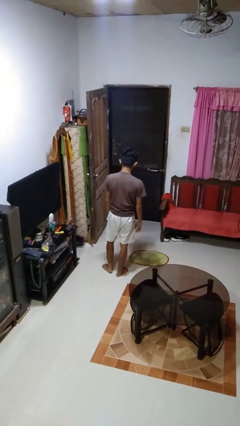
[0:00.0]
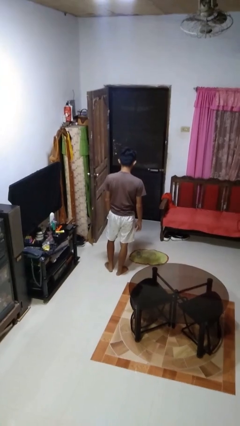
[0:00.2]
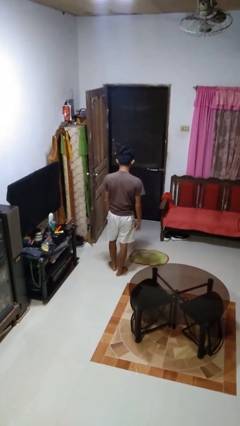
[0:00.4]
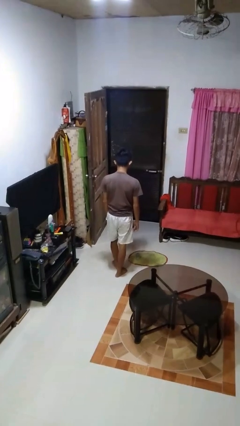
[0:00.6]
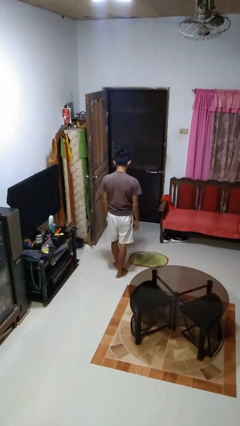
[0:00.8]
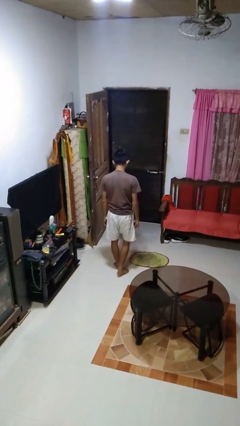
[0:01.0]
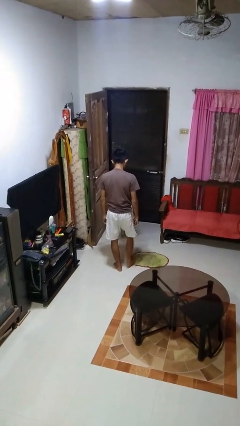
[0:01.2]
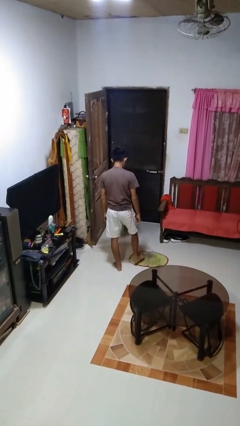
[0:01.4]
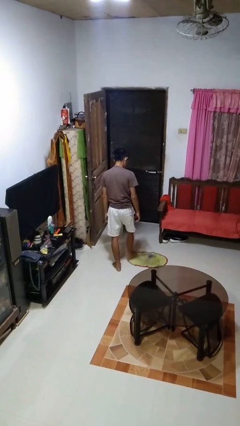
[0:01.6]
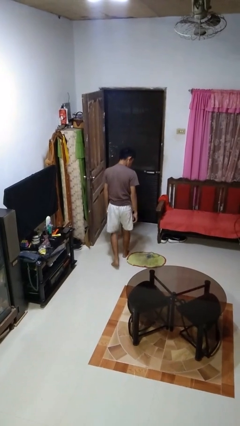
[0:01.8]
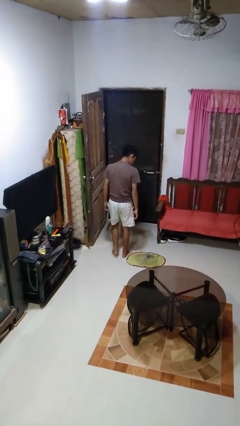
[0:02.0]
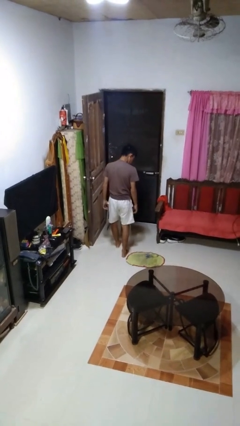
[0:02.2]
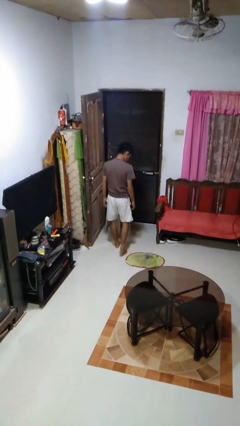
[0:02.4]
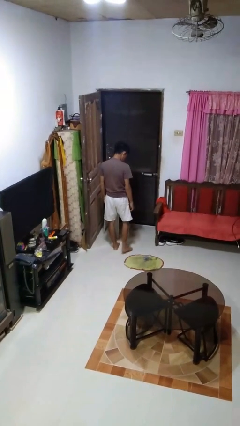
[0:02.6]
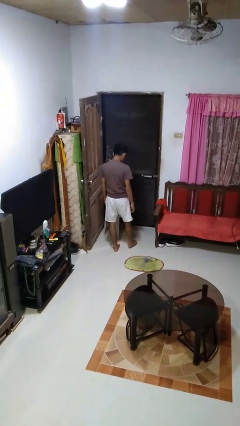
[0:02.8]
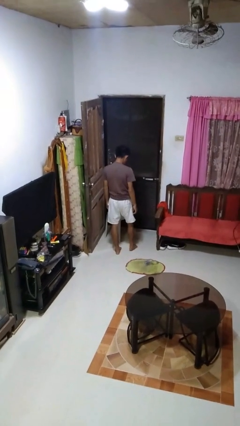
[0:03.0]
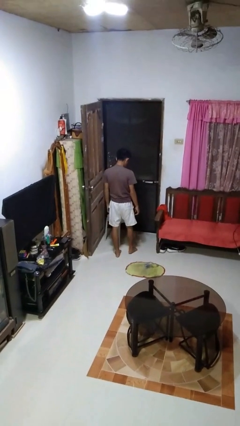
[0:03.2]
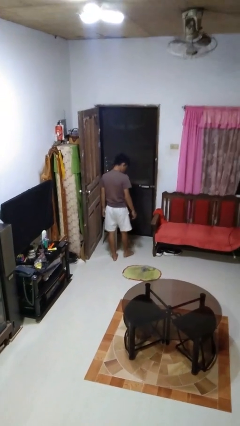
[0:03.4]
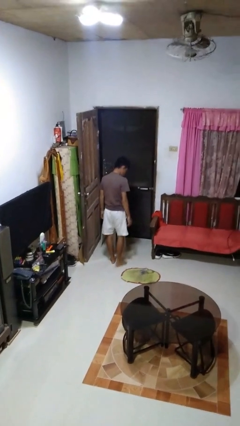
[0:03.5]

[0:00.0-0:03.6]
person spills on floor

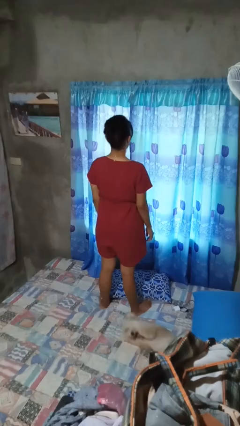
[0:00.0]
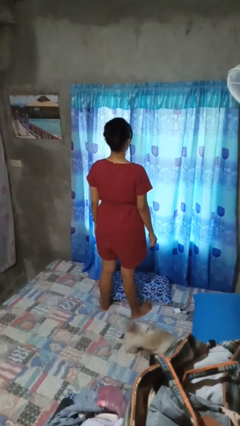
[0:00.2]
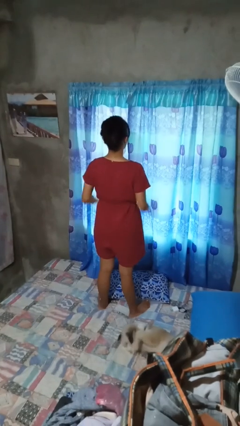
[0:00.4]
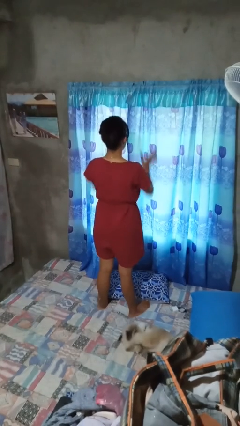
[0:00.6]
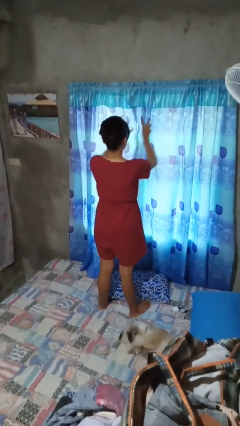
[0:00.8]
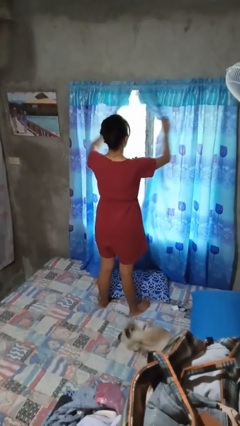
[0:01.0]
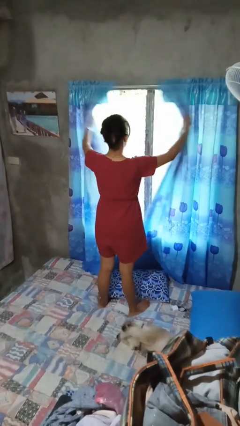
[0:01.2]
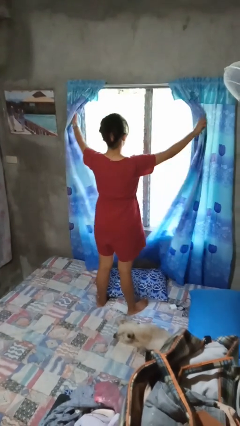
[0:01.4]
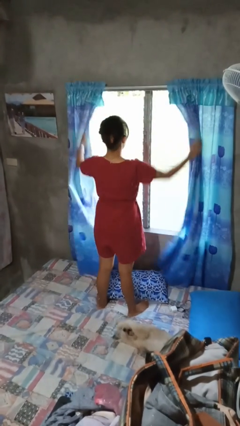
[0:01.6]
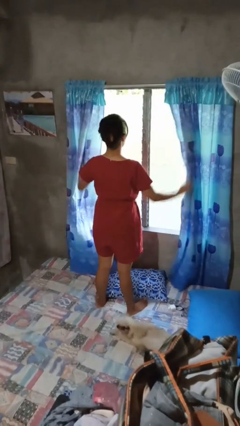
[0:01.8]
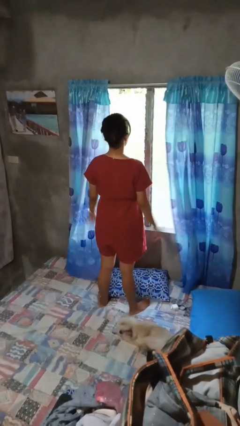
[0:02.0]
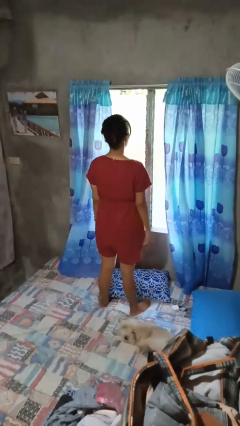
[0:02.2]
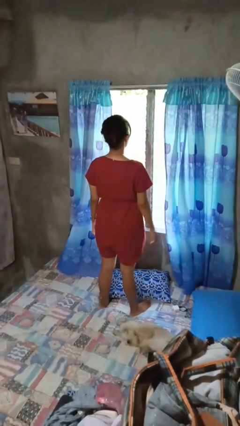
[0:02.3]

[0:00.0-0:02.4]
person opens curtains

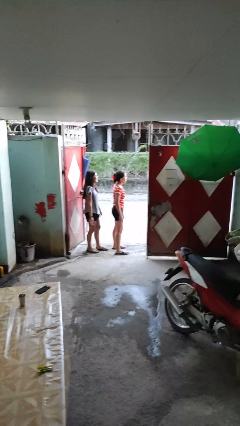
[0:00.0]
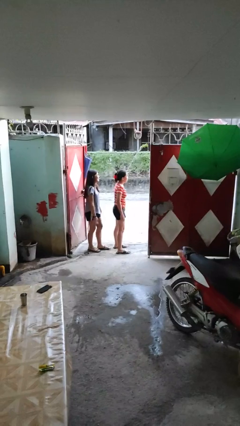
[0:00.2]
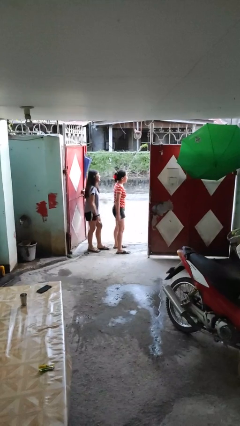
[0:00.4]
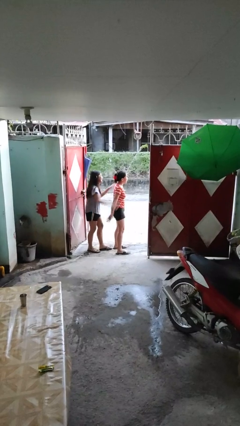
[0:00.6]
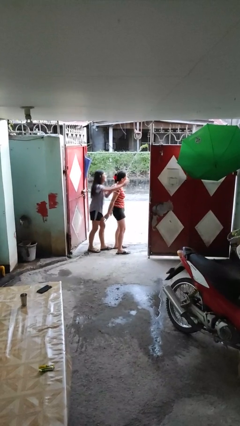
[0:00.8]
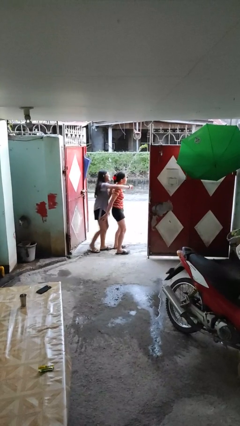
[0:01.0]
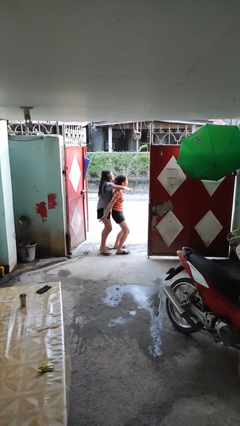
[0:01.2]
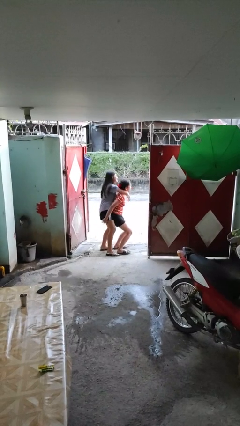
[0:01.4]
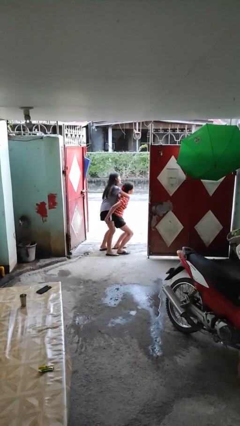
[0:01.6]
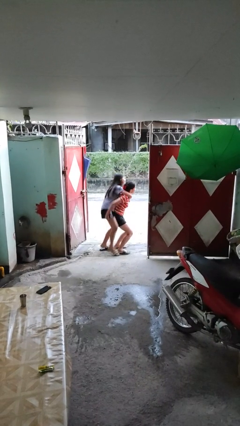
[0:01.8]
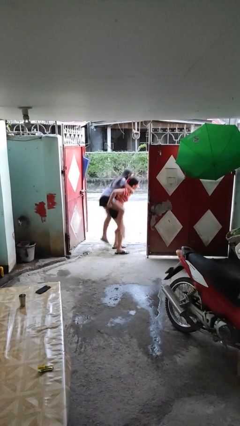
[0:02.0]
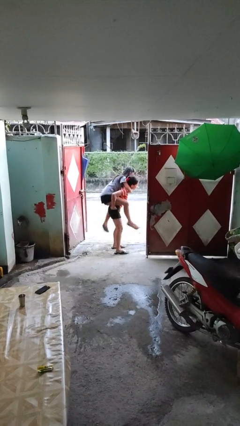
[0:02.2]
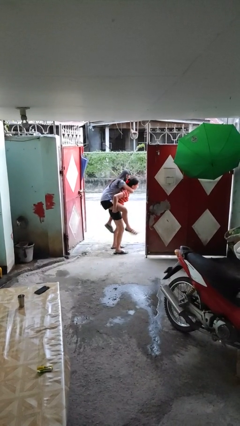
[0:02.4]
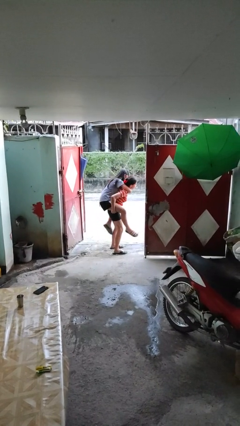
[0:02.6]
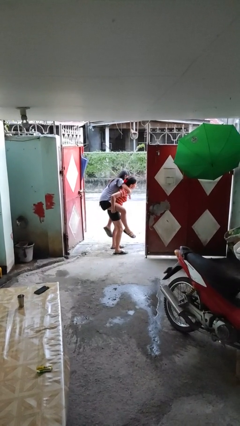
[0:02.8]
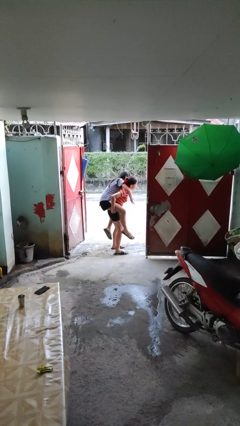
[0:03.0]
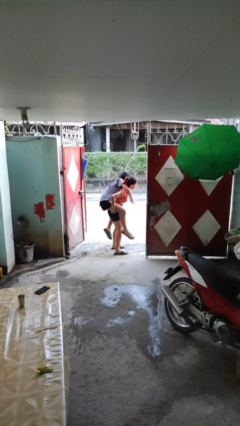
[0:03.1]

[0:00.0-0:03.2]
person carries person over shoulder

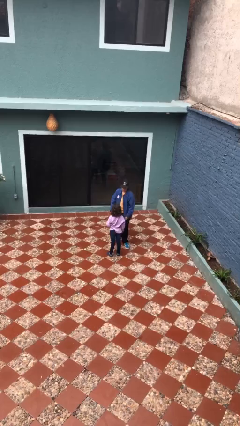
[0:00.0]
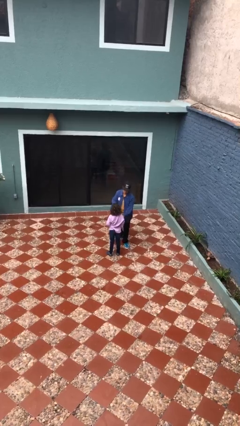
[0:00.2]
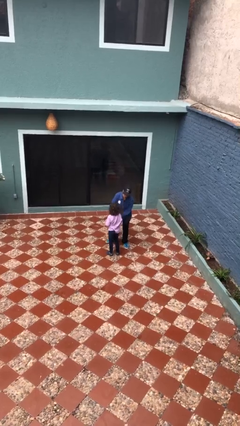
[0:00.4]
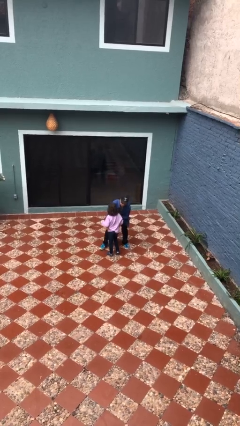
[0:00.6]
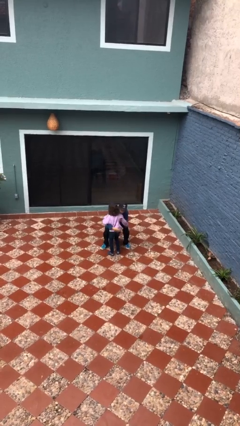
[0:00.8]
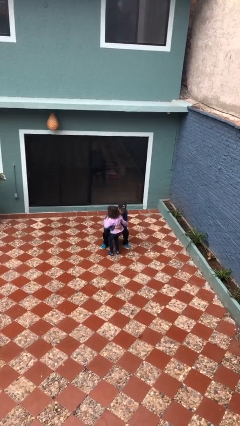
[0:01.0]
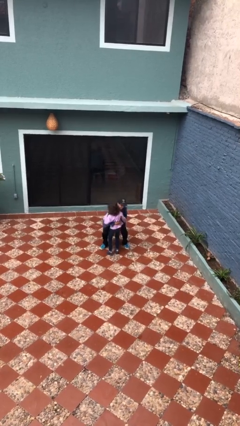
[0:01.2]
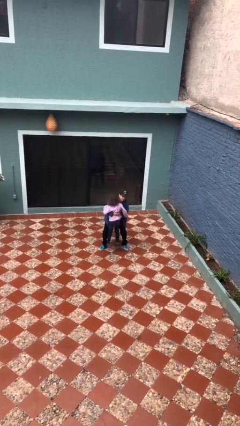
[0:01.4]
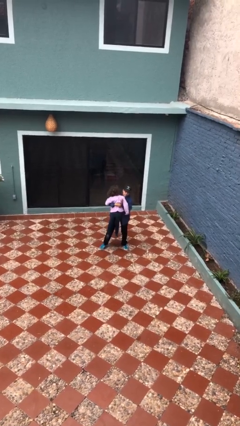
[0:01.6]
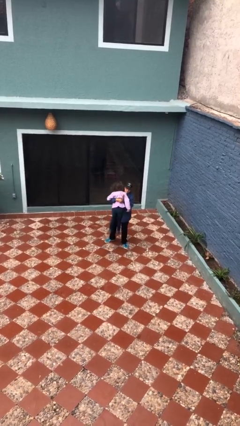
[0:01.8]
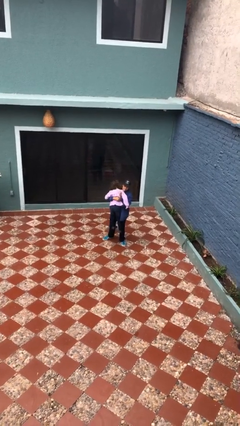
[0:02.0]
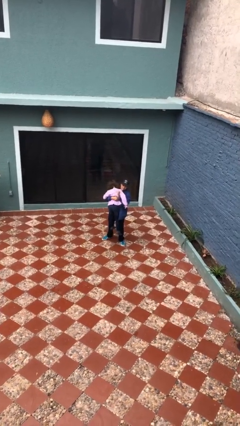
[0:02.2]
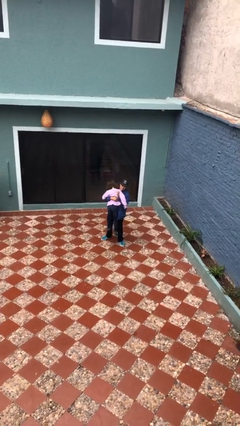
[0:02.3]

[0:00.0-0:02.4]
person picks up person

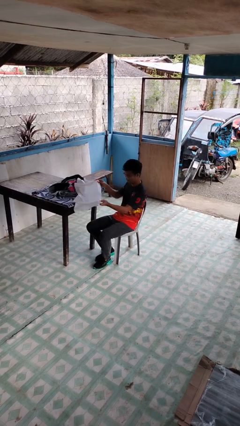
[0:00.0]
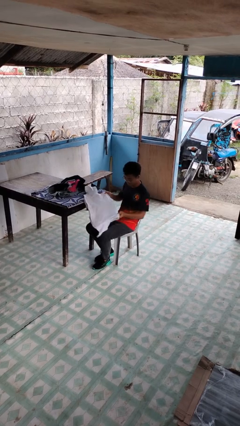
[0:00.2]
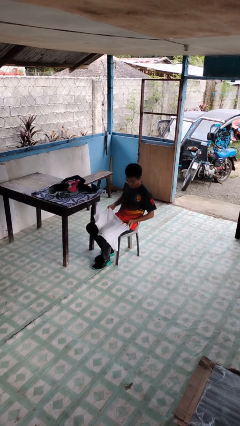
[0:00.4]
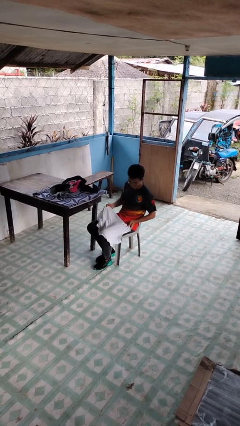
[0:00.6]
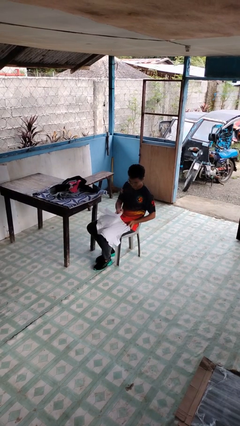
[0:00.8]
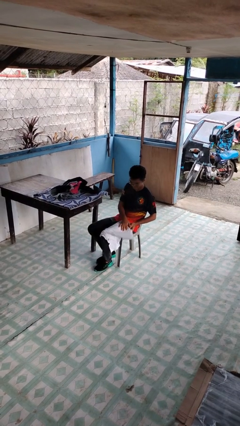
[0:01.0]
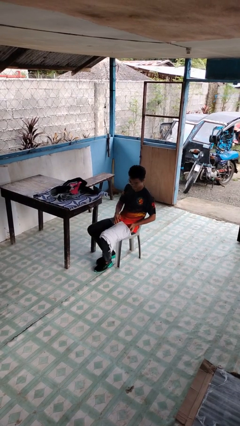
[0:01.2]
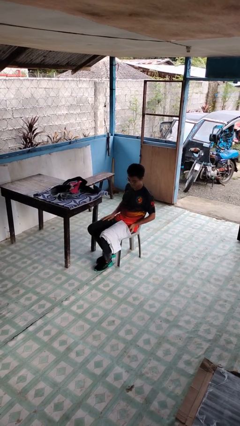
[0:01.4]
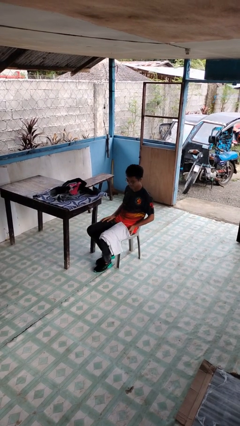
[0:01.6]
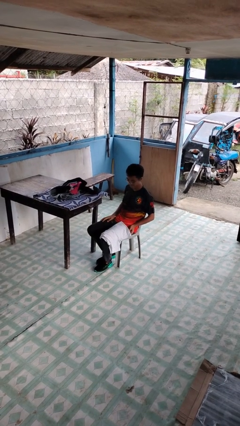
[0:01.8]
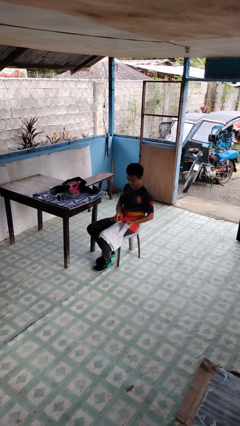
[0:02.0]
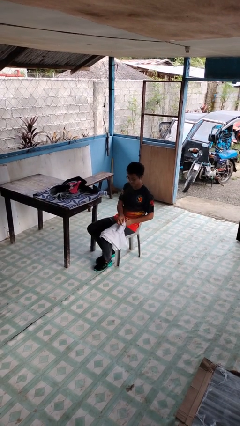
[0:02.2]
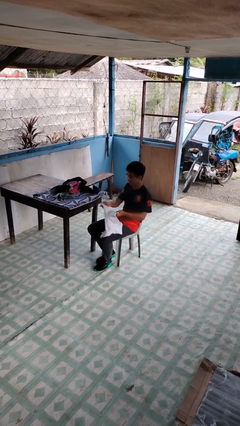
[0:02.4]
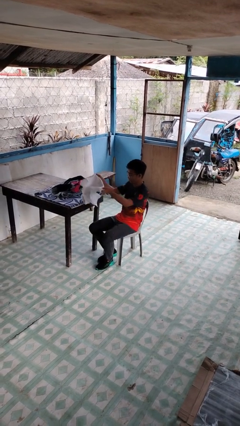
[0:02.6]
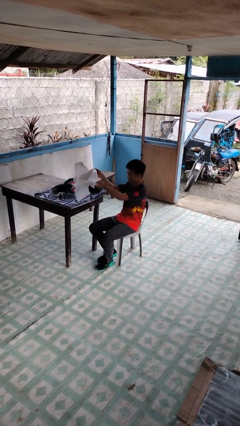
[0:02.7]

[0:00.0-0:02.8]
person folds shirt

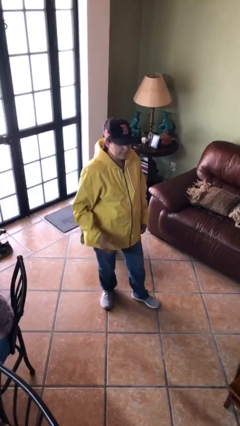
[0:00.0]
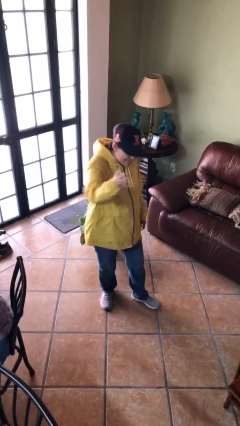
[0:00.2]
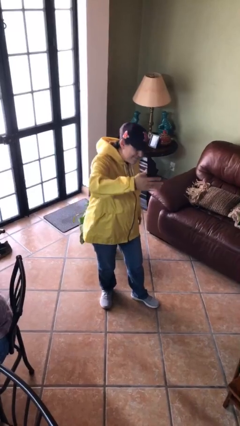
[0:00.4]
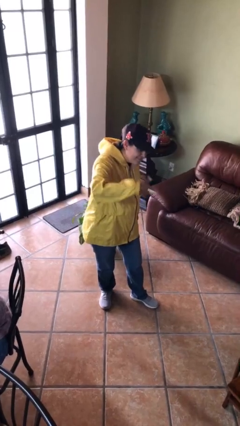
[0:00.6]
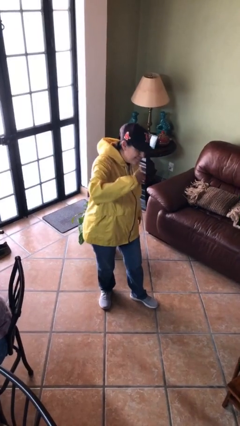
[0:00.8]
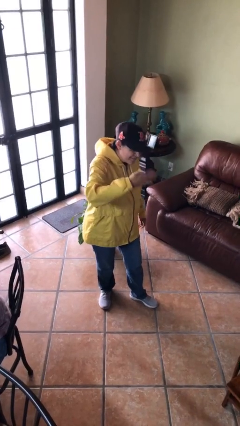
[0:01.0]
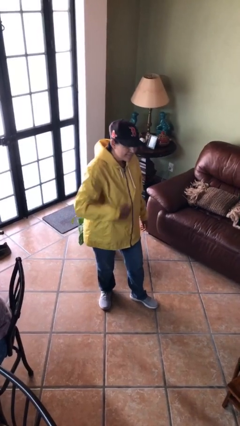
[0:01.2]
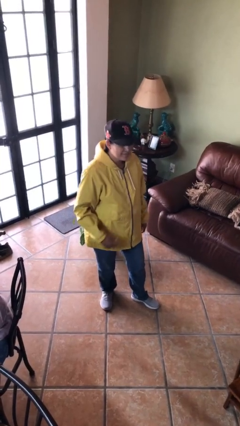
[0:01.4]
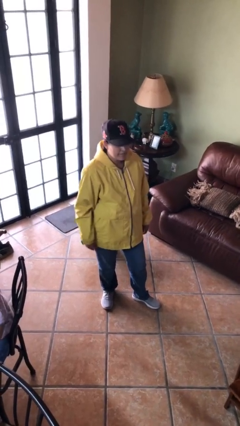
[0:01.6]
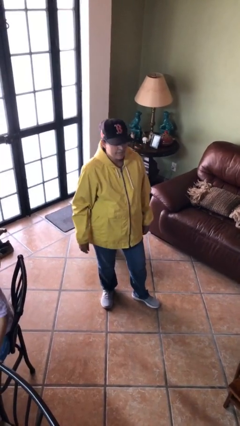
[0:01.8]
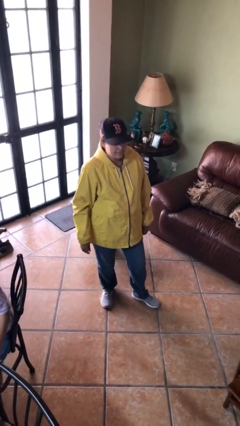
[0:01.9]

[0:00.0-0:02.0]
person gestures come here

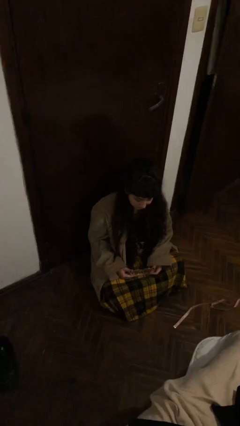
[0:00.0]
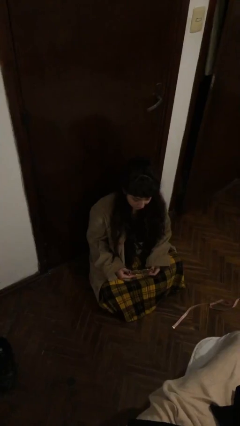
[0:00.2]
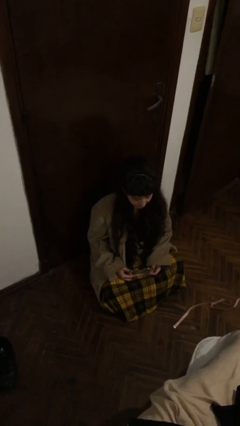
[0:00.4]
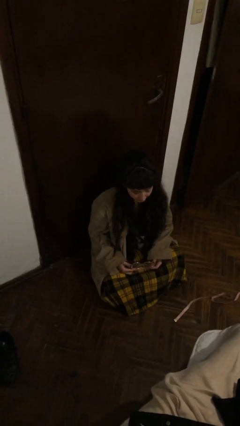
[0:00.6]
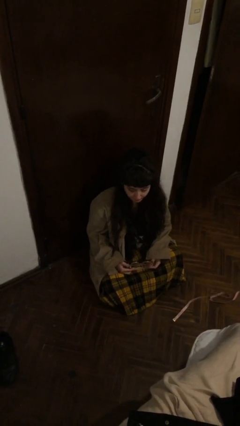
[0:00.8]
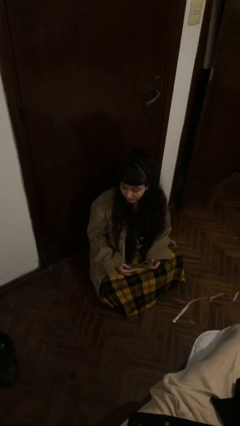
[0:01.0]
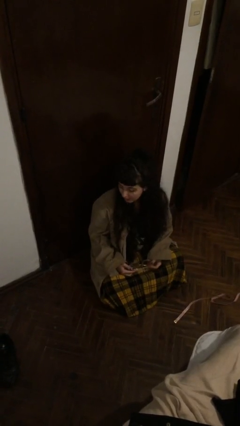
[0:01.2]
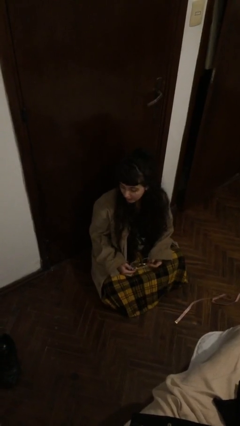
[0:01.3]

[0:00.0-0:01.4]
person puts on glasses
